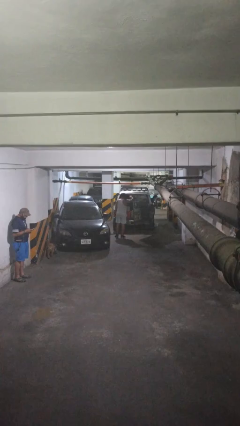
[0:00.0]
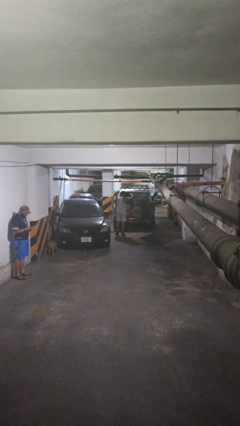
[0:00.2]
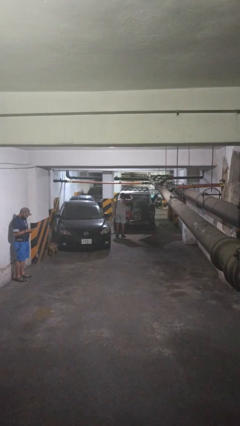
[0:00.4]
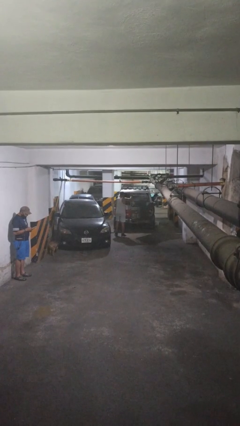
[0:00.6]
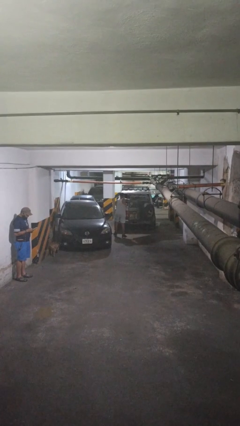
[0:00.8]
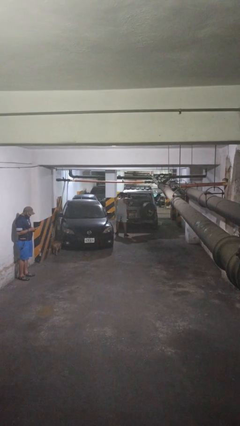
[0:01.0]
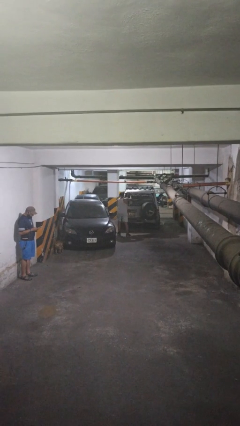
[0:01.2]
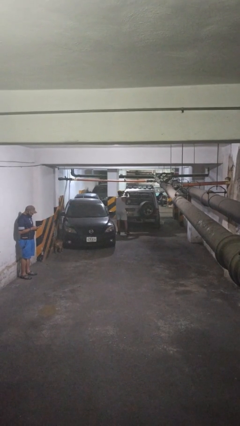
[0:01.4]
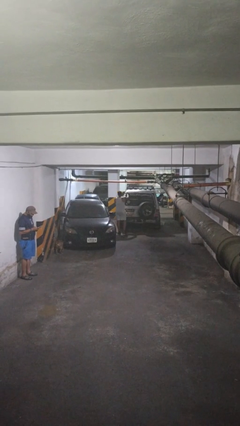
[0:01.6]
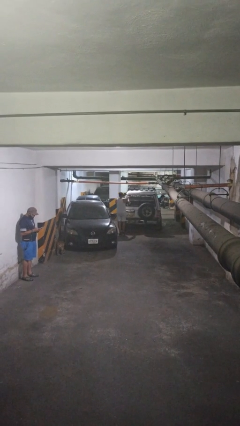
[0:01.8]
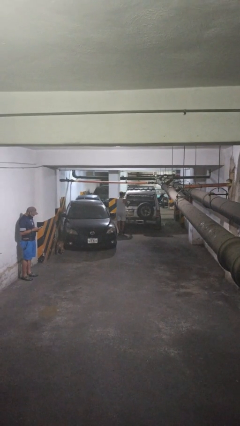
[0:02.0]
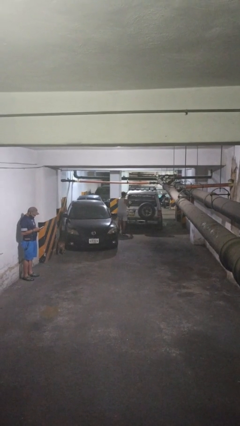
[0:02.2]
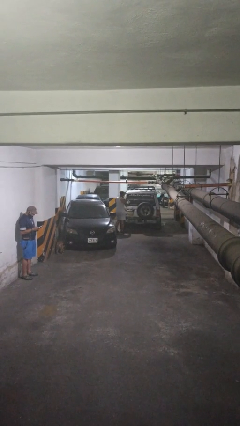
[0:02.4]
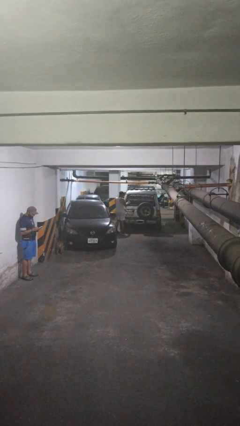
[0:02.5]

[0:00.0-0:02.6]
person closes car trunk

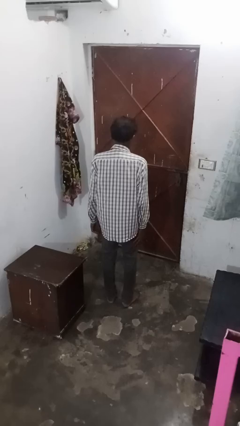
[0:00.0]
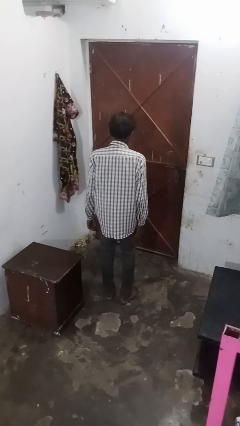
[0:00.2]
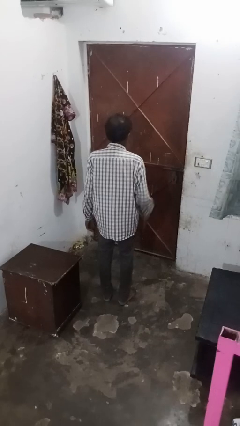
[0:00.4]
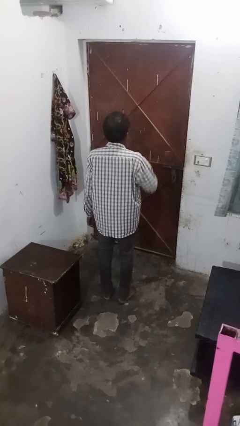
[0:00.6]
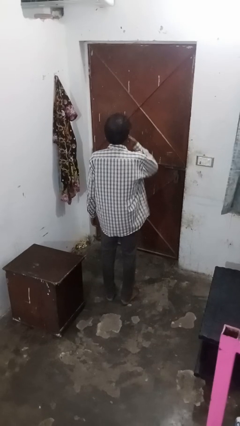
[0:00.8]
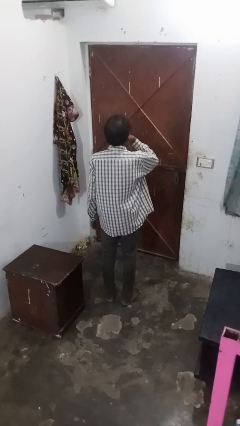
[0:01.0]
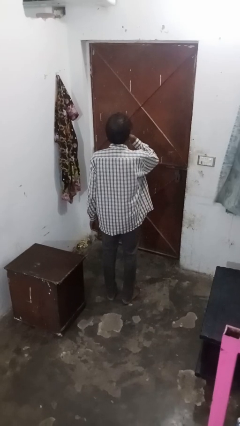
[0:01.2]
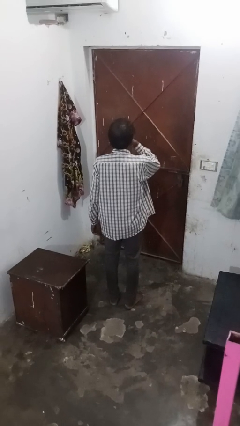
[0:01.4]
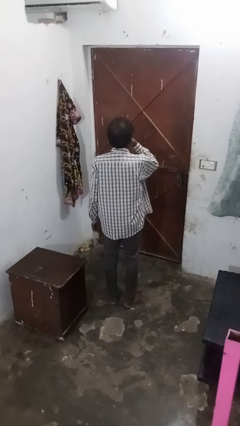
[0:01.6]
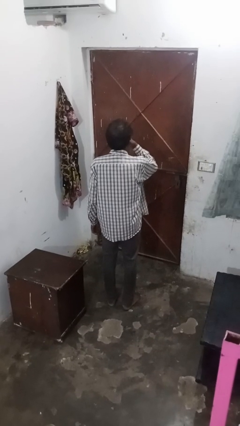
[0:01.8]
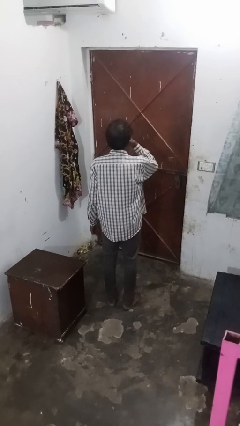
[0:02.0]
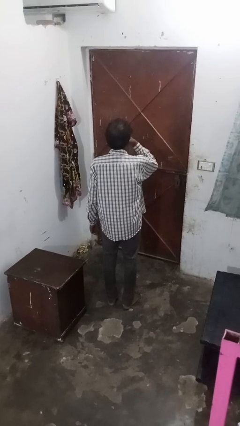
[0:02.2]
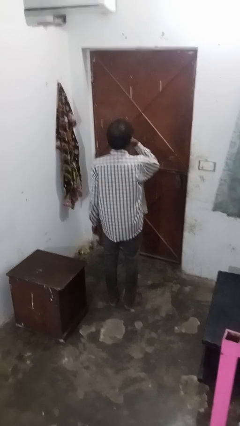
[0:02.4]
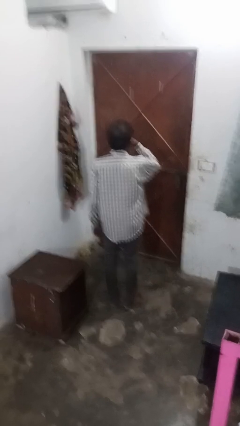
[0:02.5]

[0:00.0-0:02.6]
person strokes chin

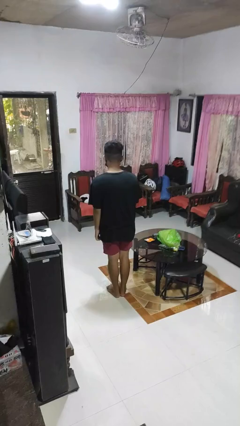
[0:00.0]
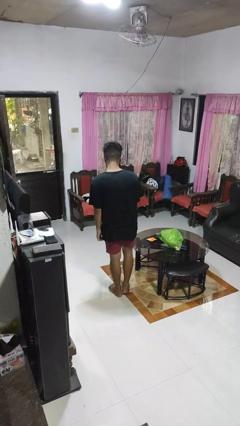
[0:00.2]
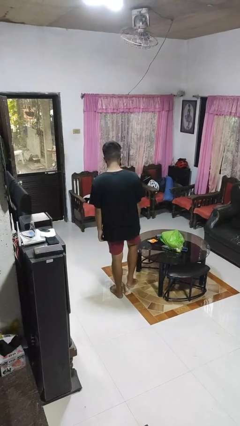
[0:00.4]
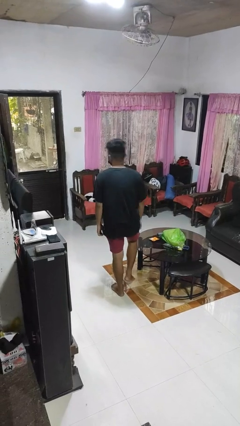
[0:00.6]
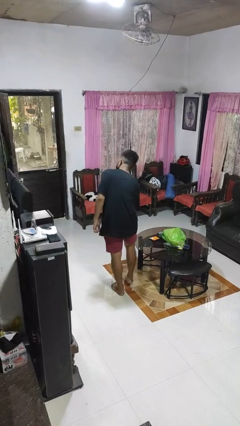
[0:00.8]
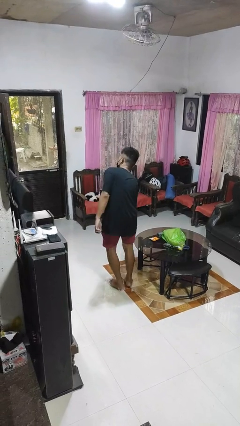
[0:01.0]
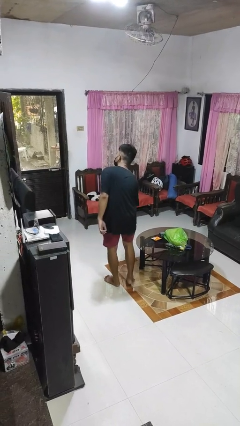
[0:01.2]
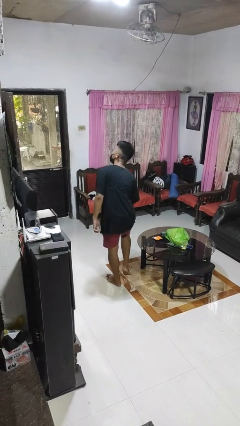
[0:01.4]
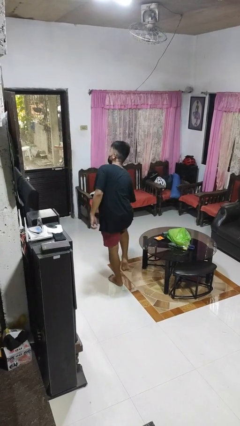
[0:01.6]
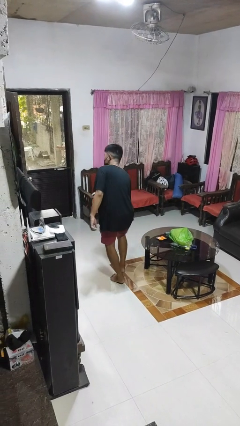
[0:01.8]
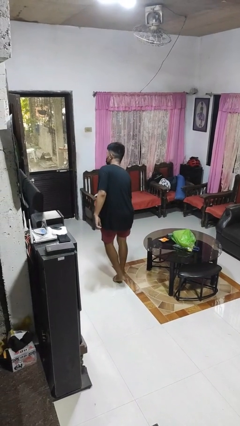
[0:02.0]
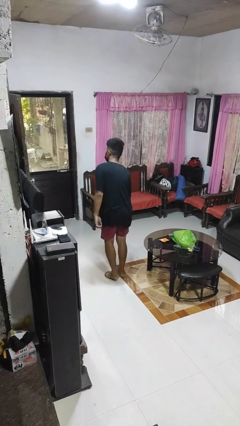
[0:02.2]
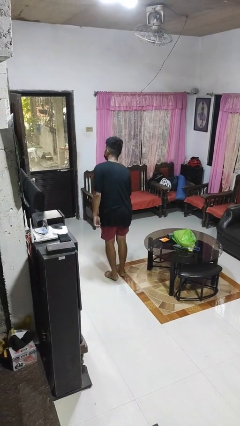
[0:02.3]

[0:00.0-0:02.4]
person bumps into table

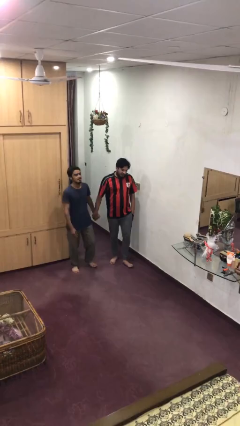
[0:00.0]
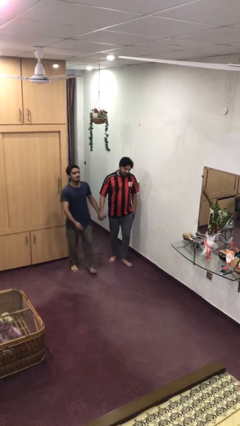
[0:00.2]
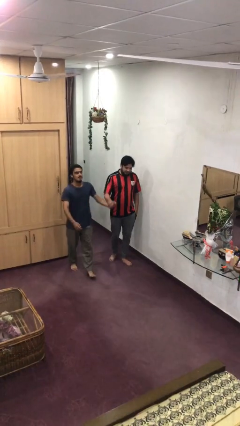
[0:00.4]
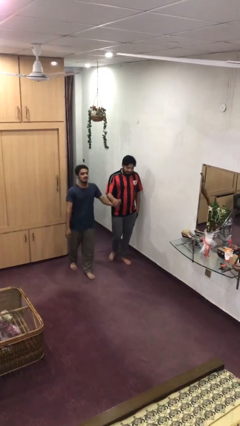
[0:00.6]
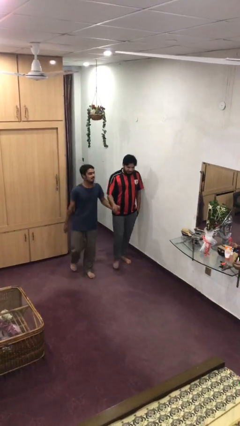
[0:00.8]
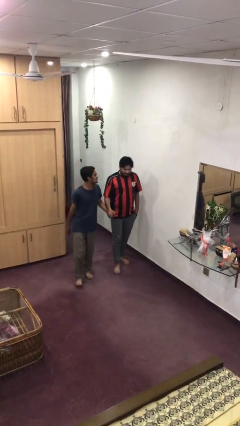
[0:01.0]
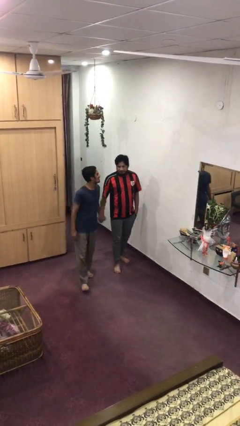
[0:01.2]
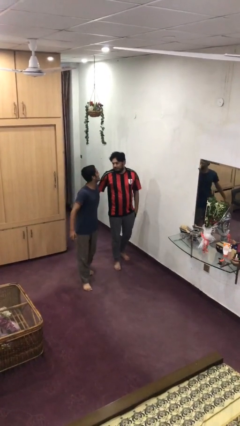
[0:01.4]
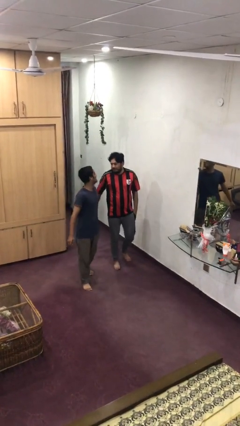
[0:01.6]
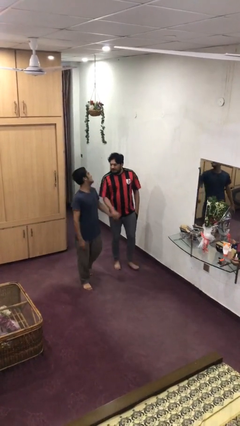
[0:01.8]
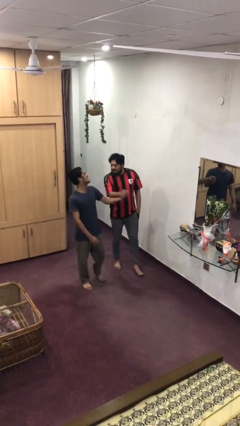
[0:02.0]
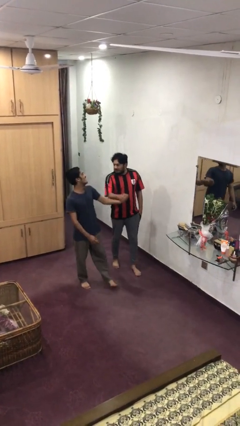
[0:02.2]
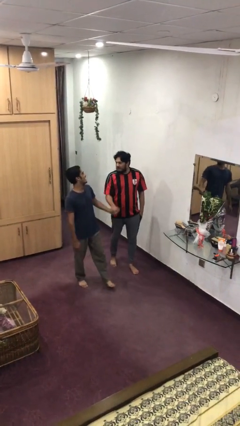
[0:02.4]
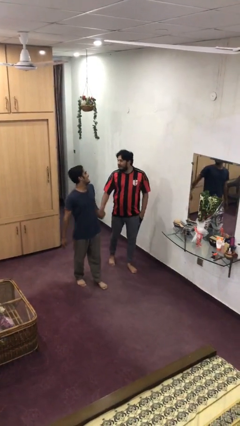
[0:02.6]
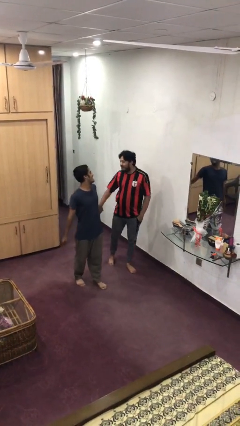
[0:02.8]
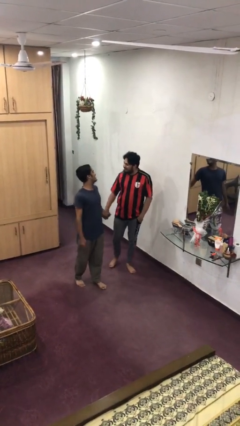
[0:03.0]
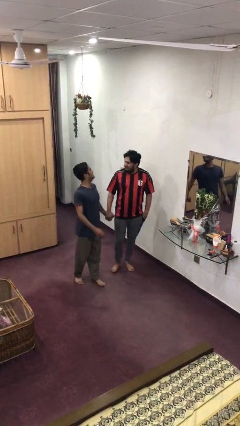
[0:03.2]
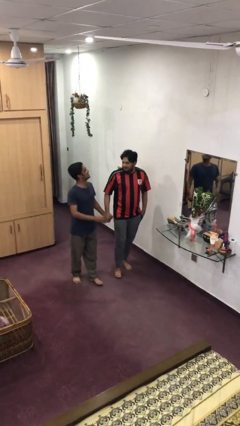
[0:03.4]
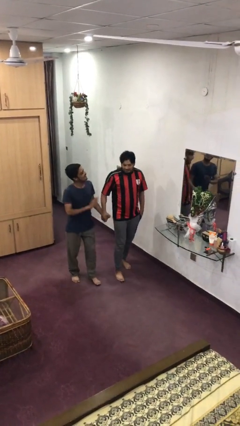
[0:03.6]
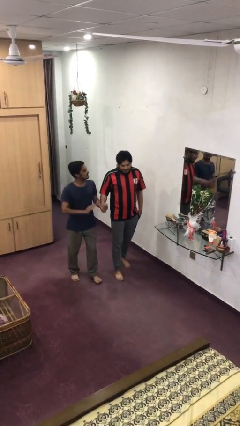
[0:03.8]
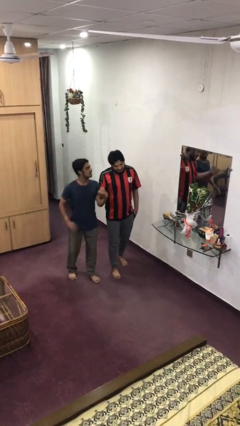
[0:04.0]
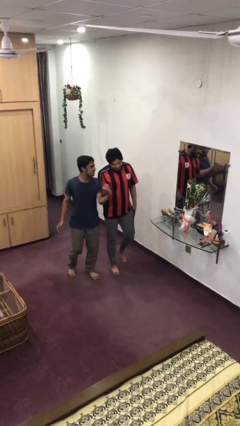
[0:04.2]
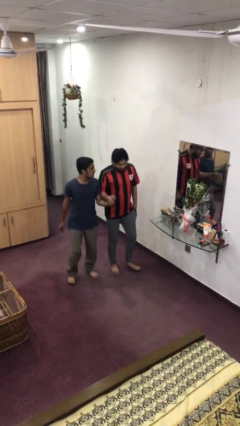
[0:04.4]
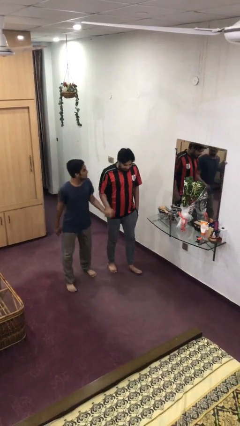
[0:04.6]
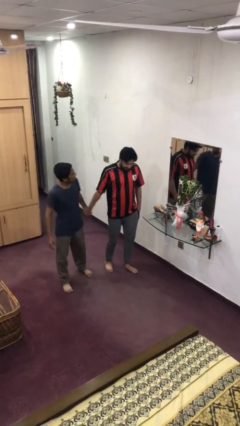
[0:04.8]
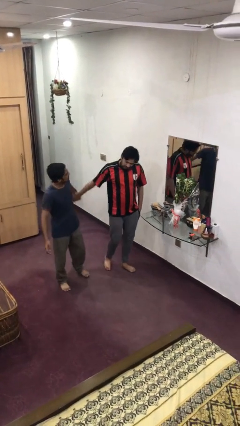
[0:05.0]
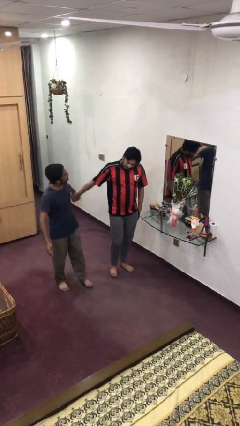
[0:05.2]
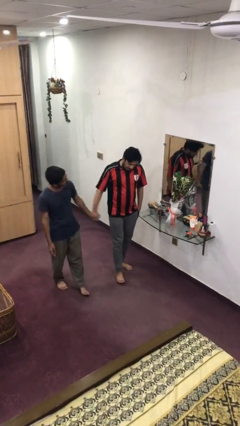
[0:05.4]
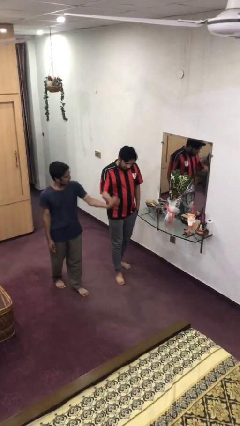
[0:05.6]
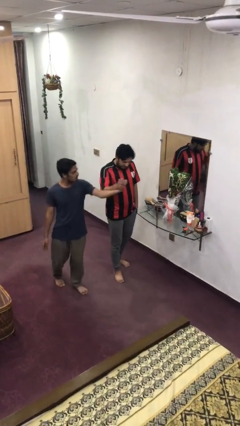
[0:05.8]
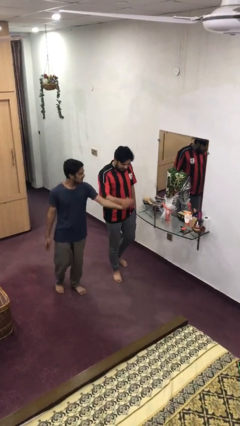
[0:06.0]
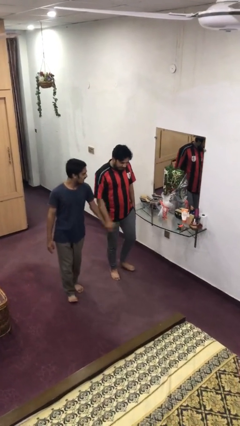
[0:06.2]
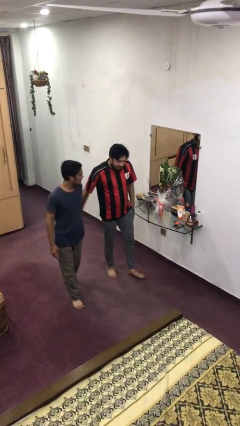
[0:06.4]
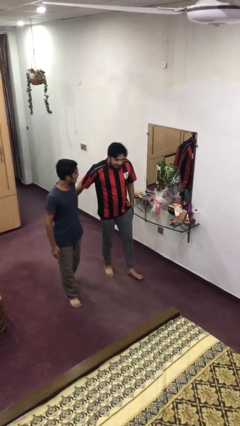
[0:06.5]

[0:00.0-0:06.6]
person holds hand
